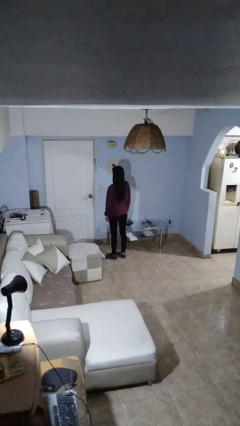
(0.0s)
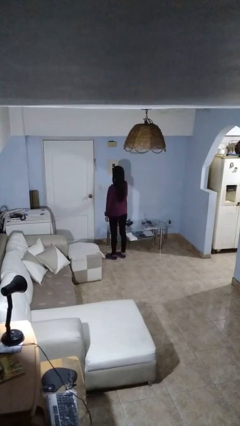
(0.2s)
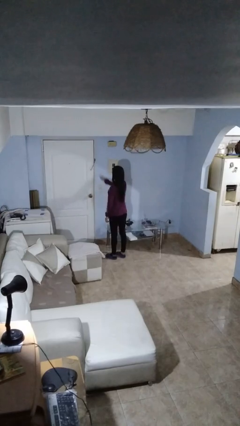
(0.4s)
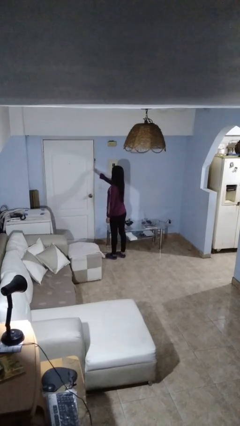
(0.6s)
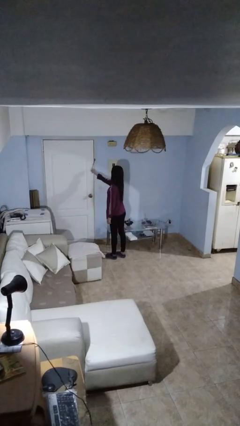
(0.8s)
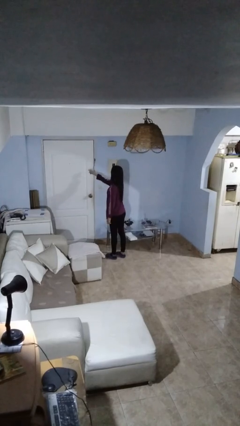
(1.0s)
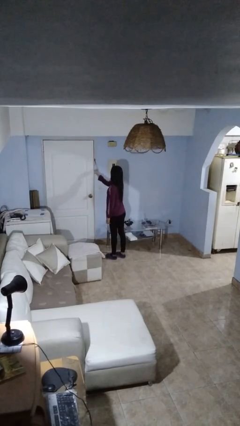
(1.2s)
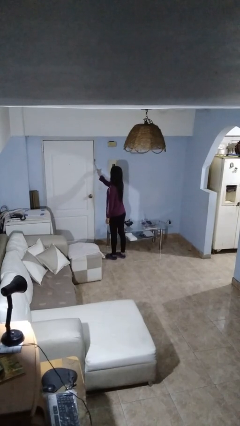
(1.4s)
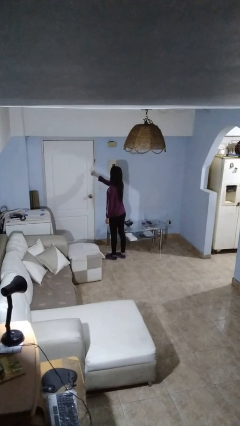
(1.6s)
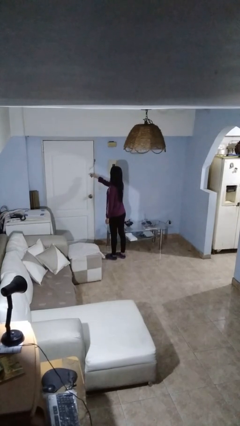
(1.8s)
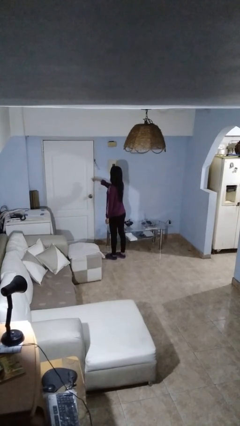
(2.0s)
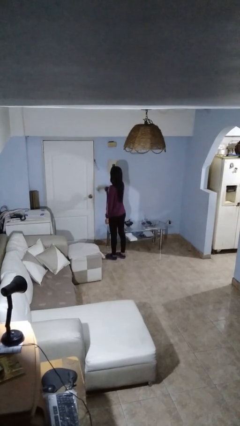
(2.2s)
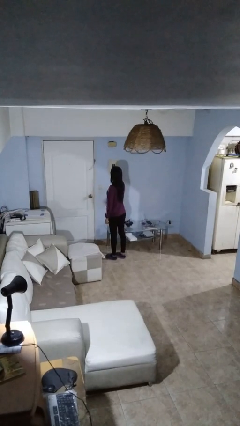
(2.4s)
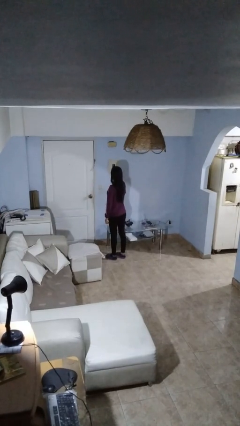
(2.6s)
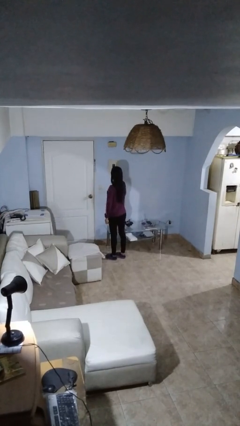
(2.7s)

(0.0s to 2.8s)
person taps object with finger

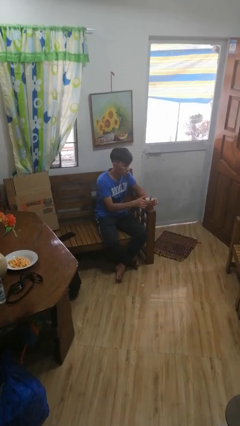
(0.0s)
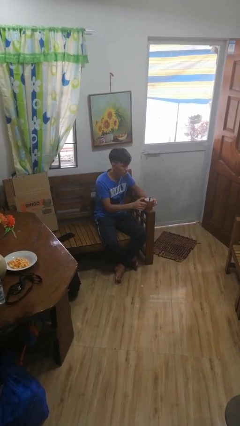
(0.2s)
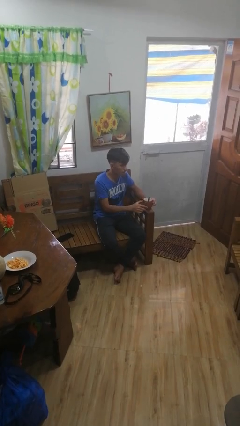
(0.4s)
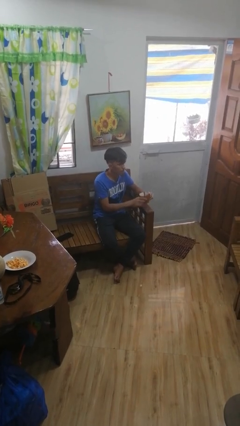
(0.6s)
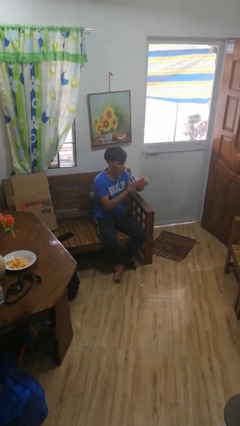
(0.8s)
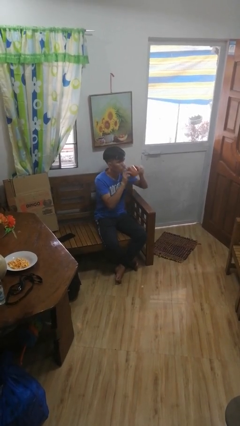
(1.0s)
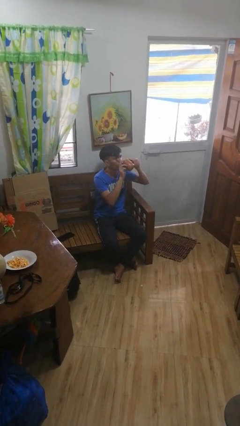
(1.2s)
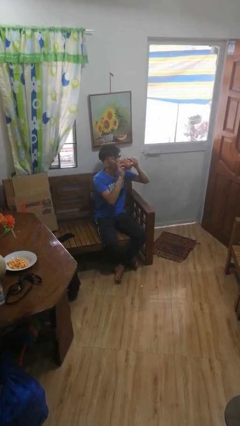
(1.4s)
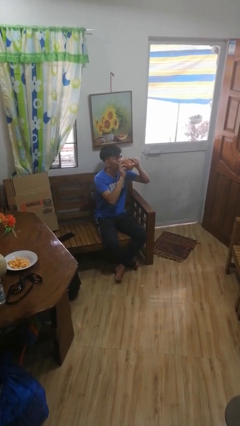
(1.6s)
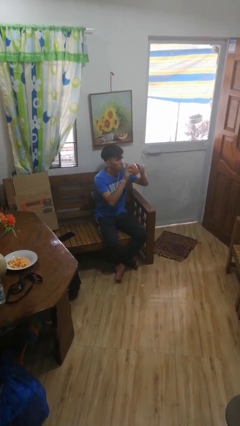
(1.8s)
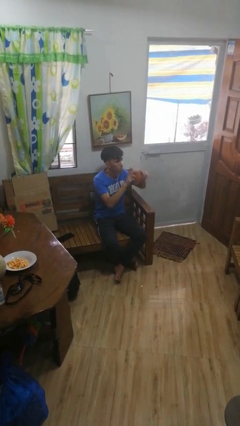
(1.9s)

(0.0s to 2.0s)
person drinks from mug

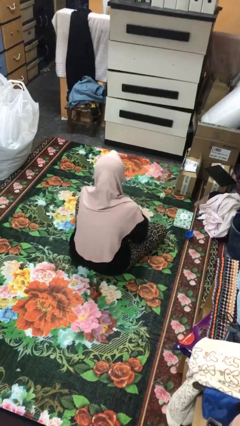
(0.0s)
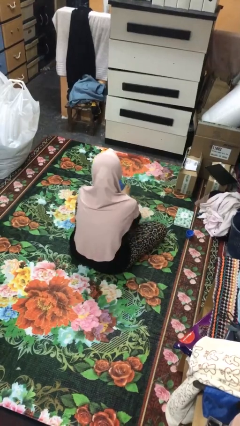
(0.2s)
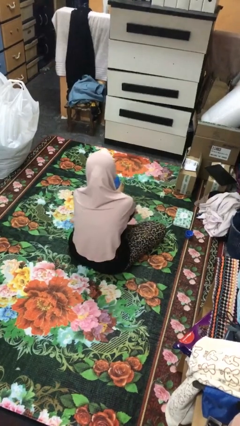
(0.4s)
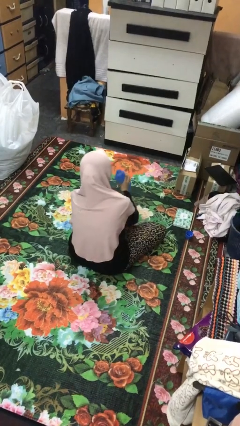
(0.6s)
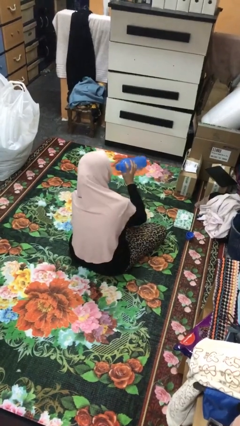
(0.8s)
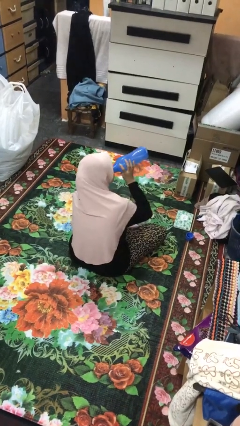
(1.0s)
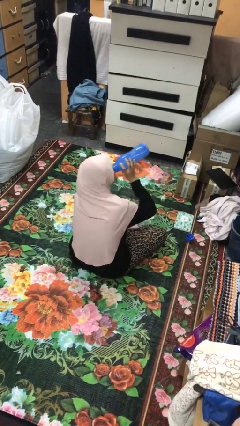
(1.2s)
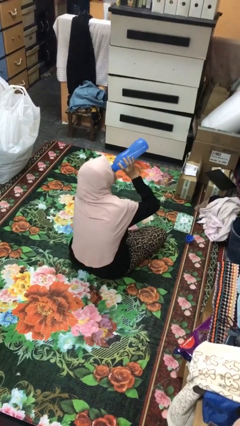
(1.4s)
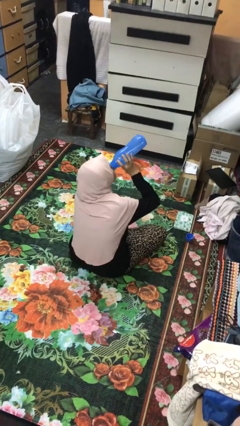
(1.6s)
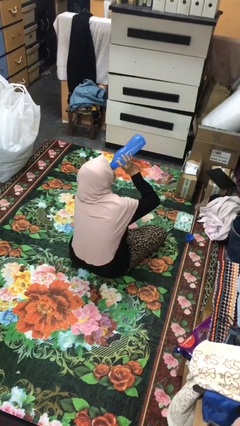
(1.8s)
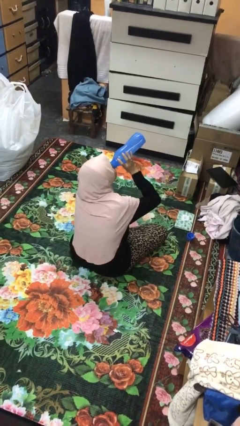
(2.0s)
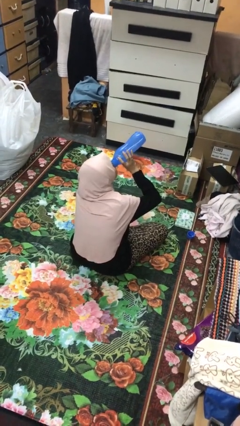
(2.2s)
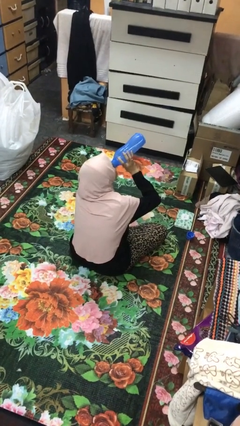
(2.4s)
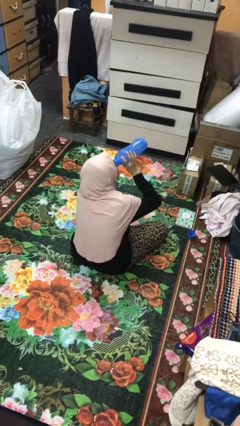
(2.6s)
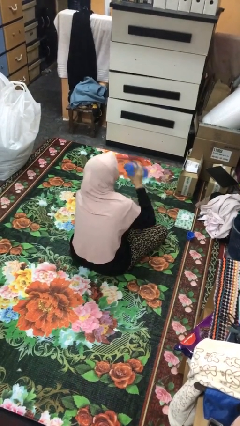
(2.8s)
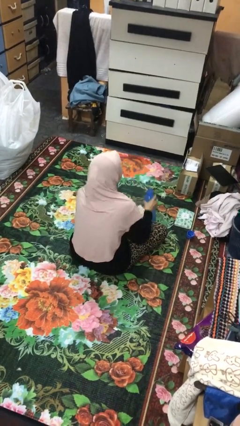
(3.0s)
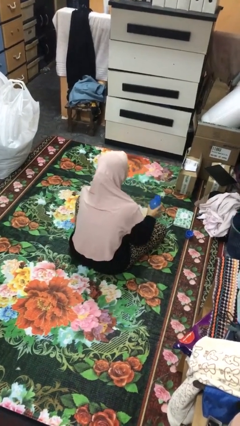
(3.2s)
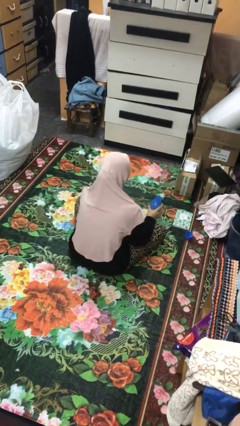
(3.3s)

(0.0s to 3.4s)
person drinks from bottle

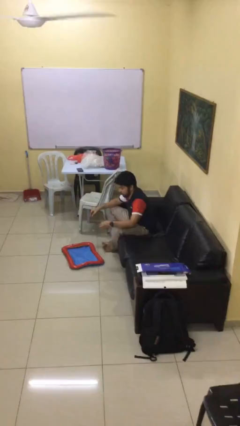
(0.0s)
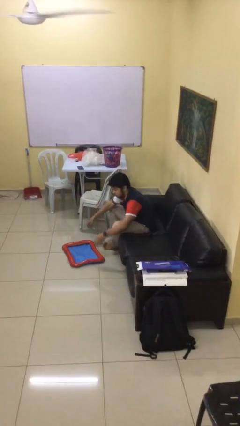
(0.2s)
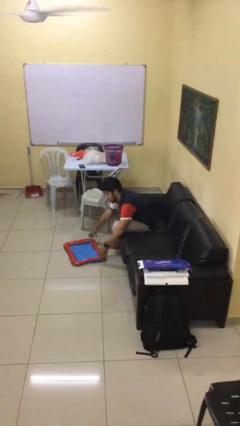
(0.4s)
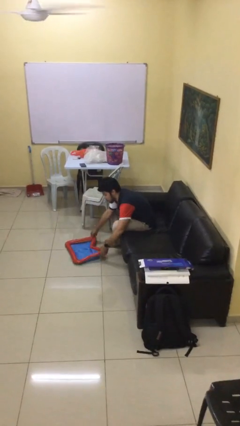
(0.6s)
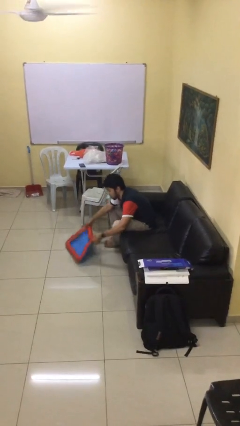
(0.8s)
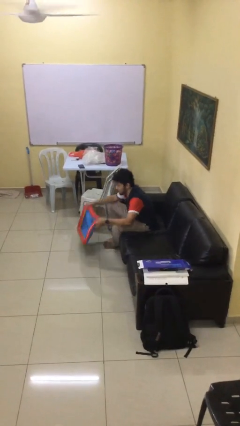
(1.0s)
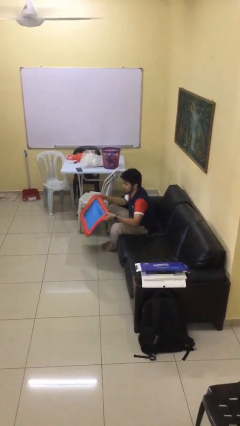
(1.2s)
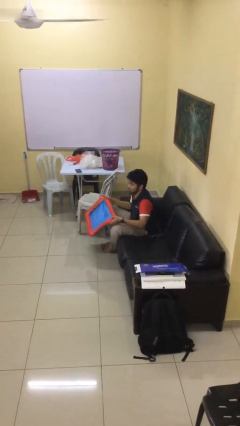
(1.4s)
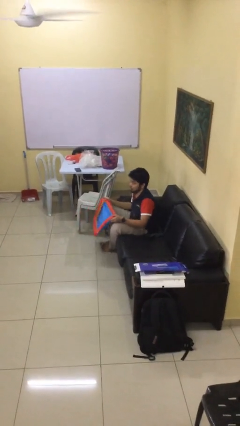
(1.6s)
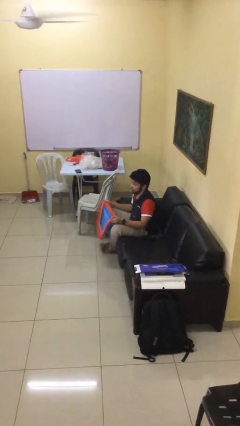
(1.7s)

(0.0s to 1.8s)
person picks up object from floor

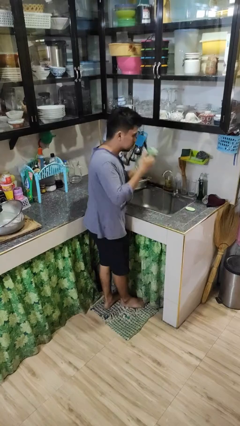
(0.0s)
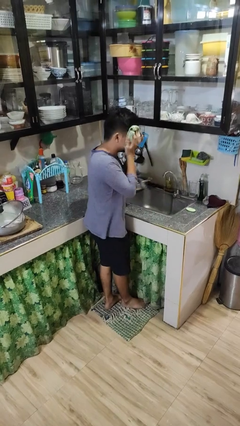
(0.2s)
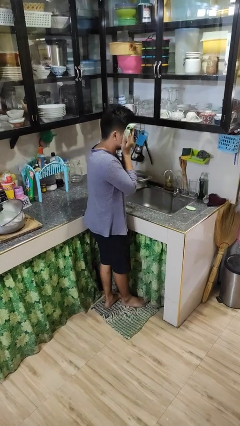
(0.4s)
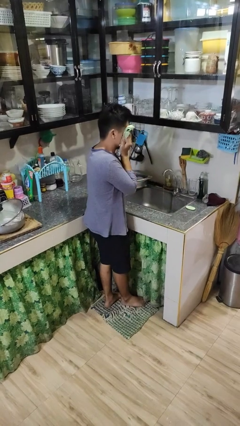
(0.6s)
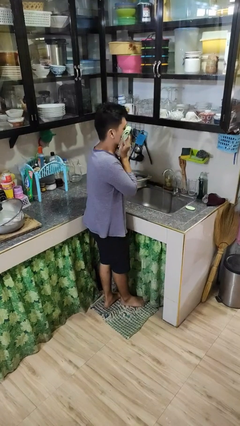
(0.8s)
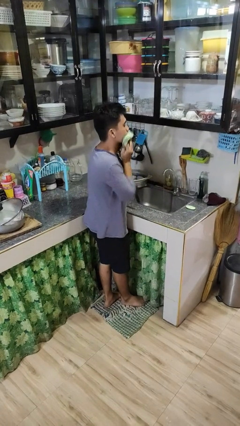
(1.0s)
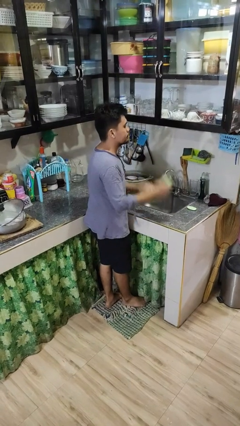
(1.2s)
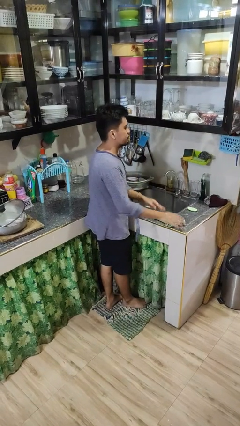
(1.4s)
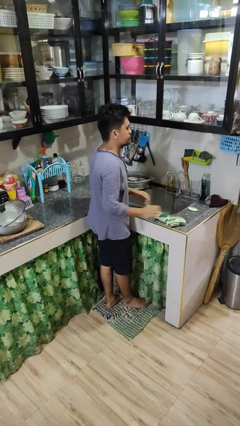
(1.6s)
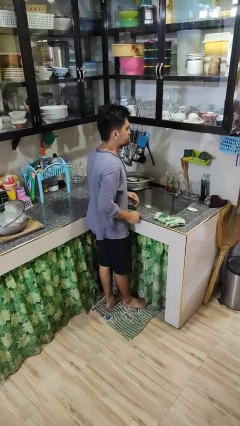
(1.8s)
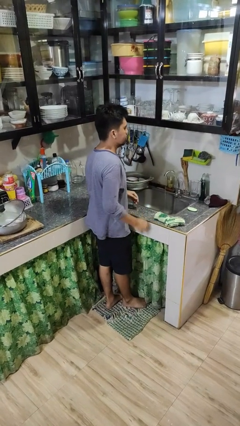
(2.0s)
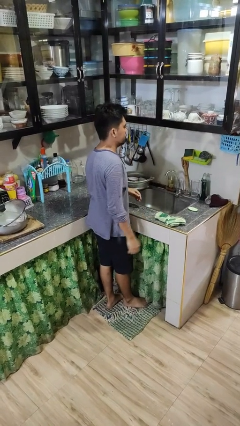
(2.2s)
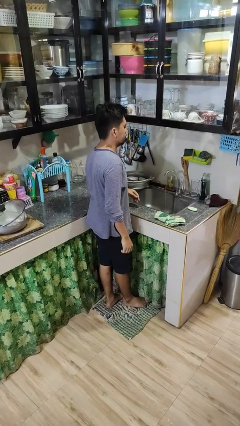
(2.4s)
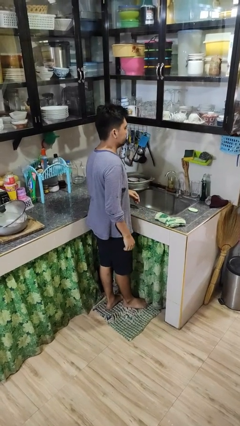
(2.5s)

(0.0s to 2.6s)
person dries face with towel

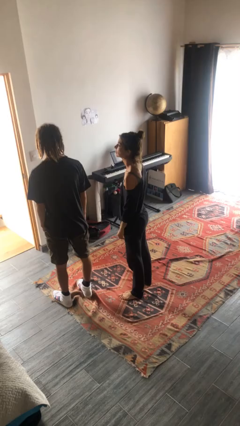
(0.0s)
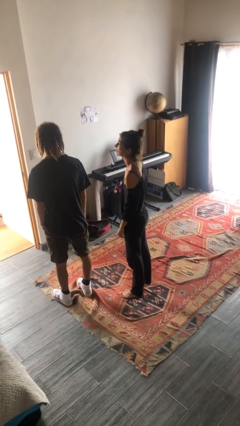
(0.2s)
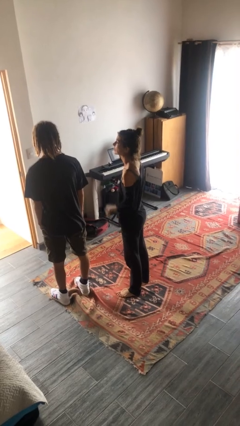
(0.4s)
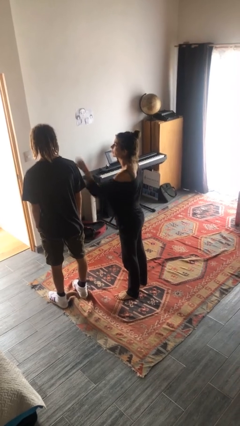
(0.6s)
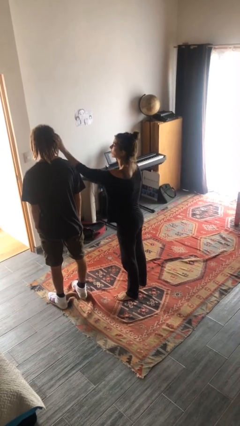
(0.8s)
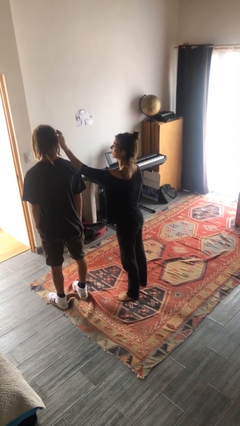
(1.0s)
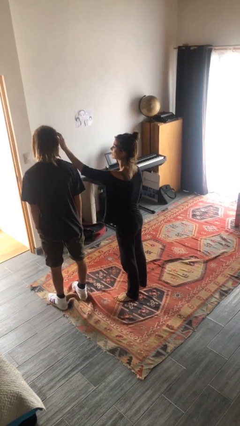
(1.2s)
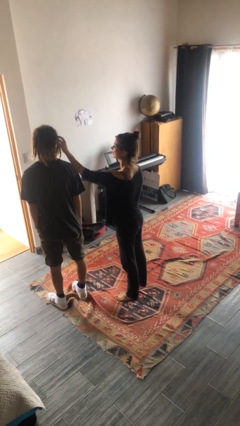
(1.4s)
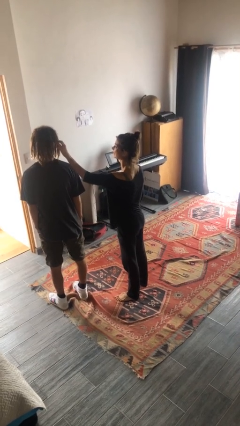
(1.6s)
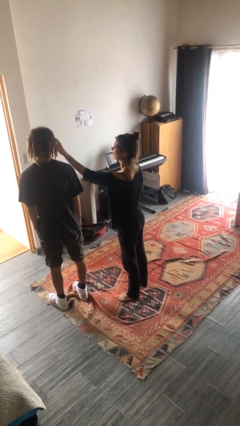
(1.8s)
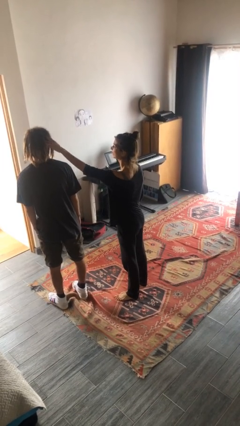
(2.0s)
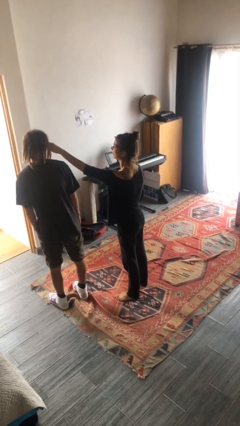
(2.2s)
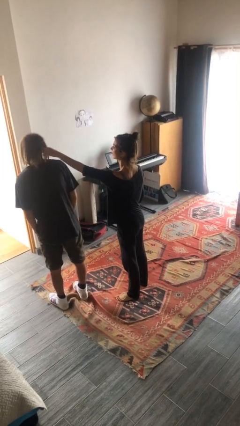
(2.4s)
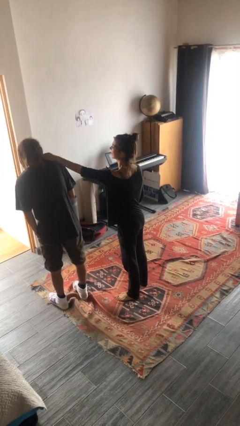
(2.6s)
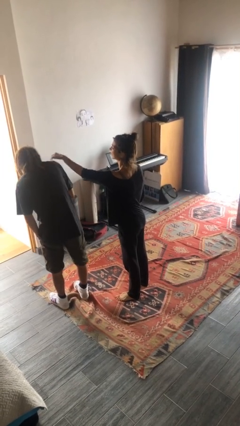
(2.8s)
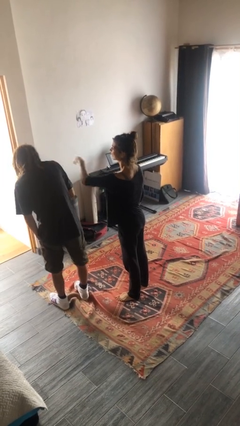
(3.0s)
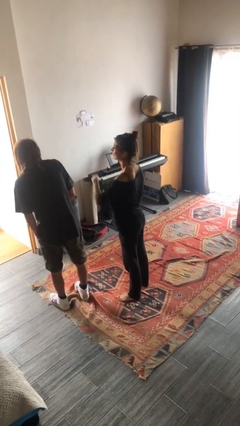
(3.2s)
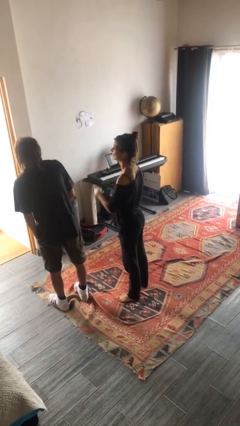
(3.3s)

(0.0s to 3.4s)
person grabs person by hair

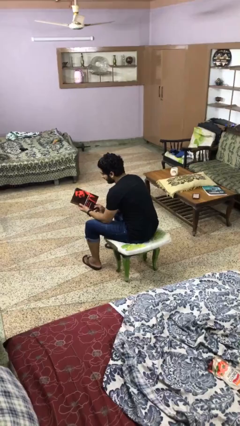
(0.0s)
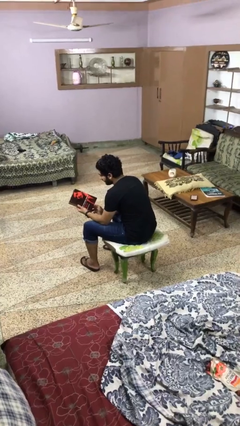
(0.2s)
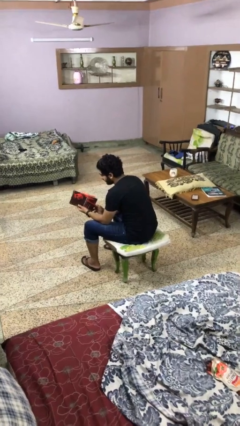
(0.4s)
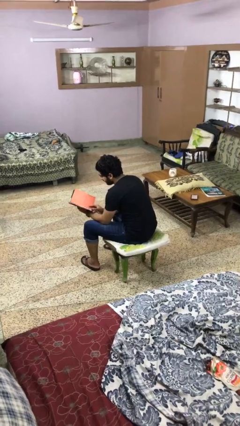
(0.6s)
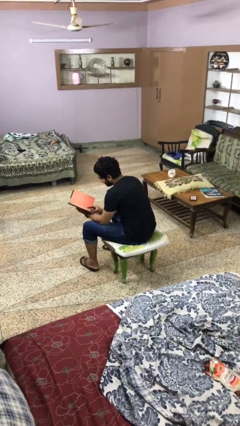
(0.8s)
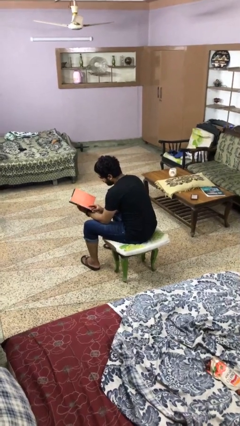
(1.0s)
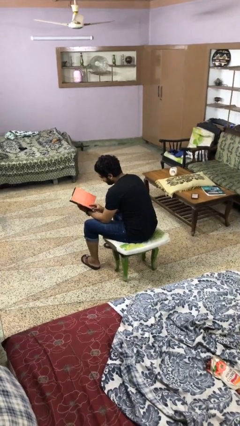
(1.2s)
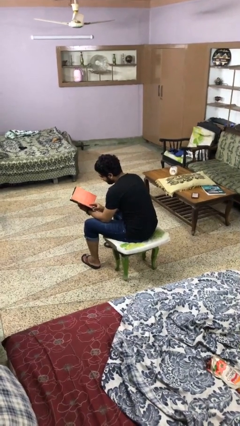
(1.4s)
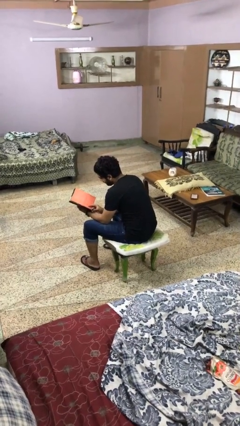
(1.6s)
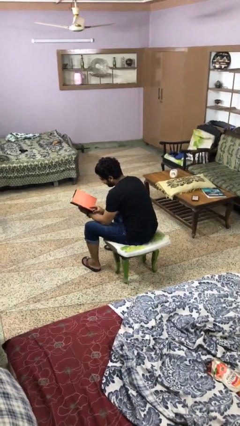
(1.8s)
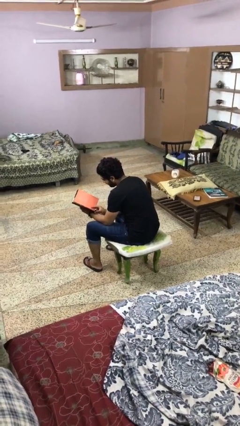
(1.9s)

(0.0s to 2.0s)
person reads magazine
